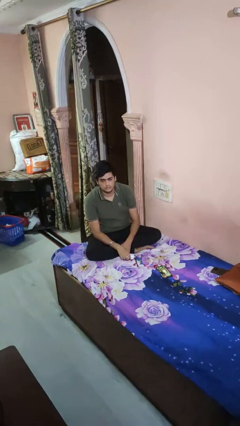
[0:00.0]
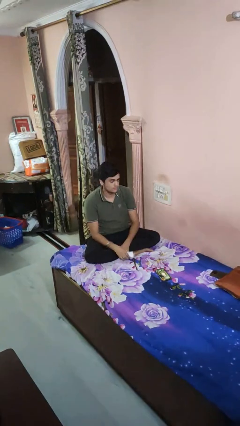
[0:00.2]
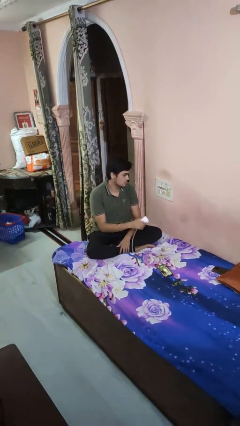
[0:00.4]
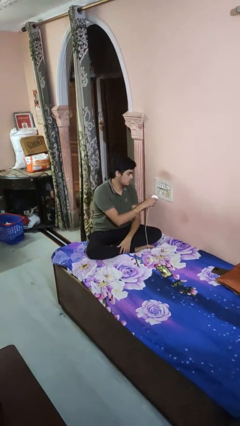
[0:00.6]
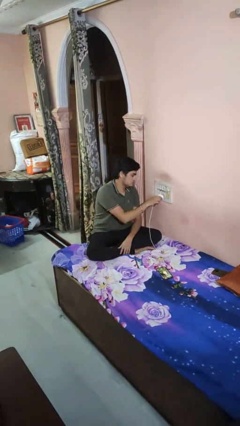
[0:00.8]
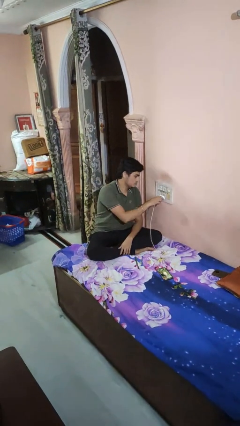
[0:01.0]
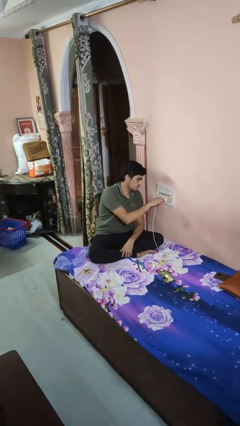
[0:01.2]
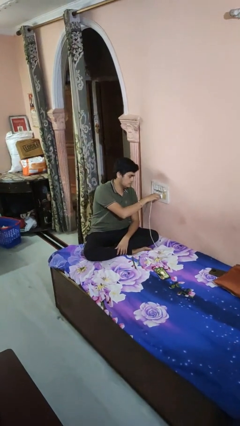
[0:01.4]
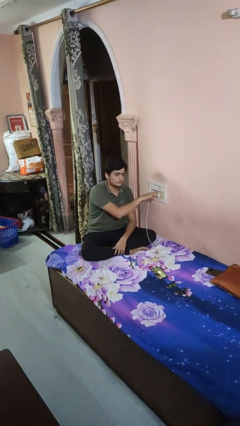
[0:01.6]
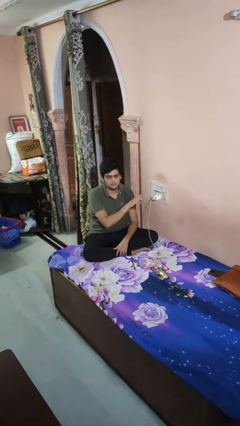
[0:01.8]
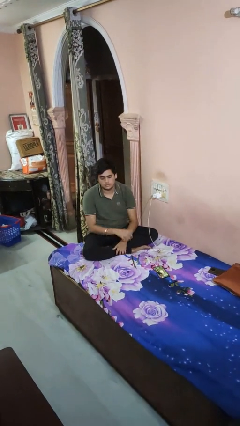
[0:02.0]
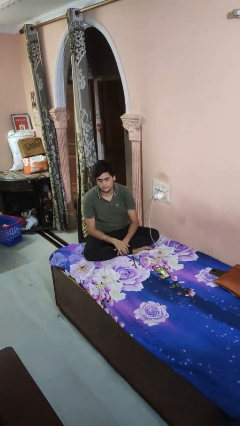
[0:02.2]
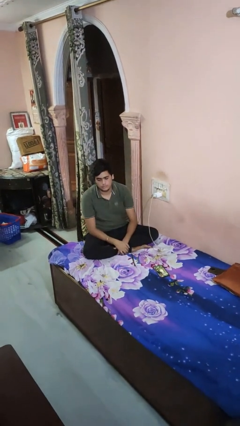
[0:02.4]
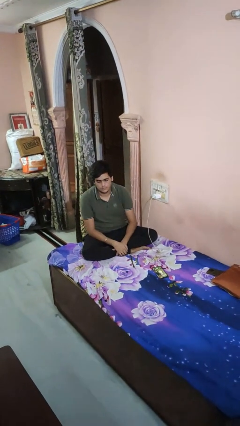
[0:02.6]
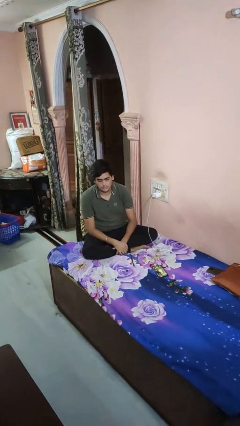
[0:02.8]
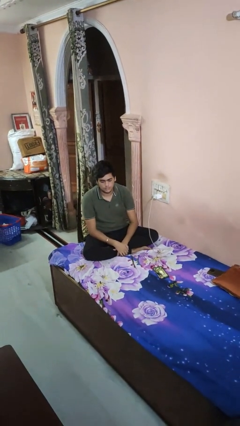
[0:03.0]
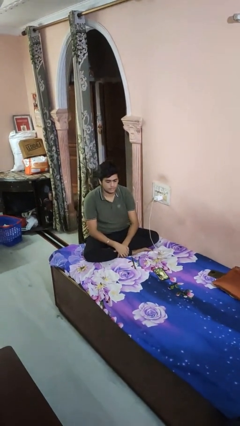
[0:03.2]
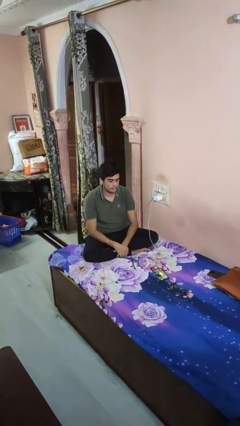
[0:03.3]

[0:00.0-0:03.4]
person plugs into electrical socket

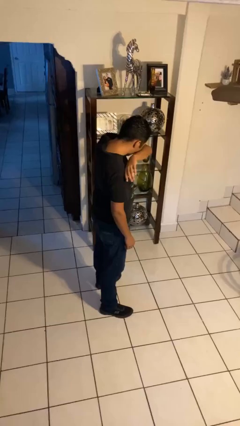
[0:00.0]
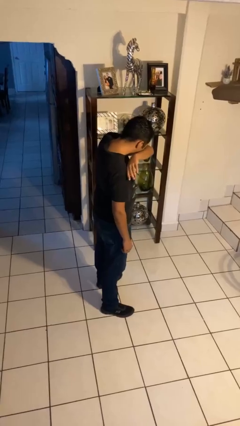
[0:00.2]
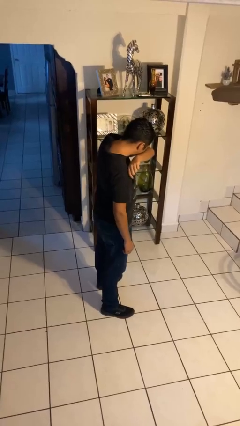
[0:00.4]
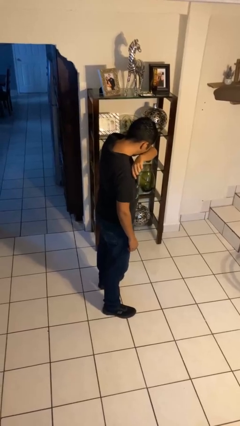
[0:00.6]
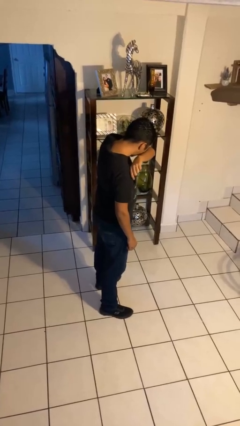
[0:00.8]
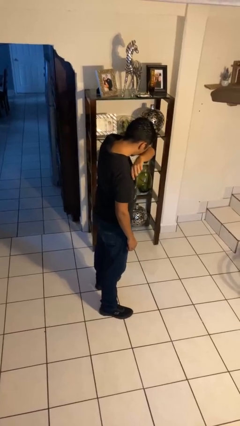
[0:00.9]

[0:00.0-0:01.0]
person sneezes into arm

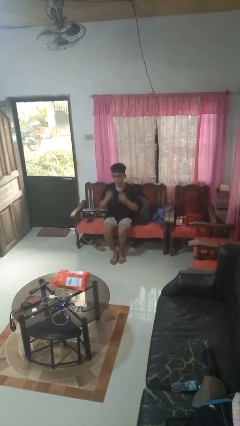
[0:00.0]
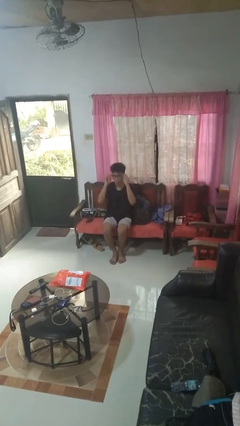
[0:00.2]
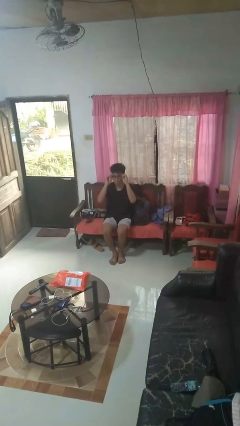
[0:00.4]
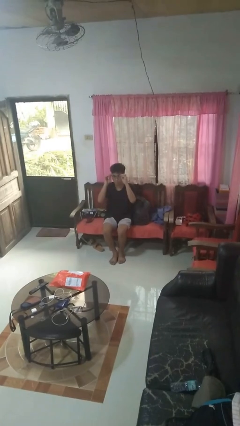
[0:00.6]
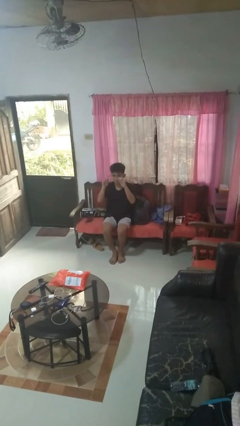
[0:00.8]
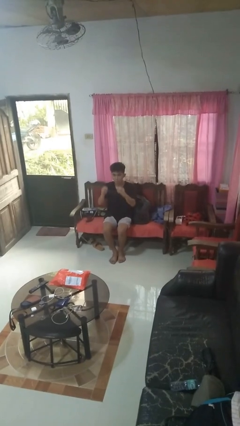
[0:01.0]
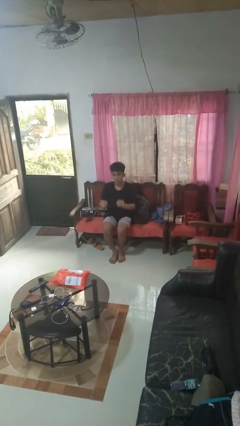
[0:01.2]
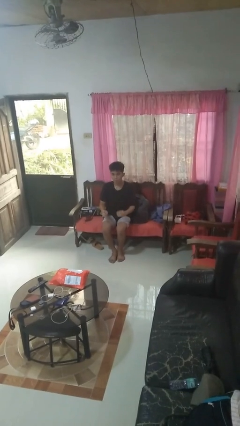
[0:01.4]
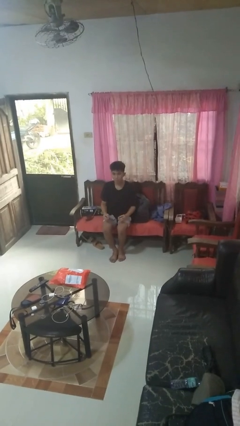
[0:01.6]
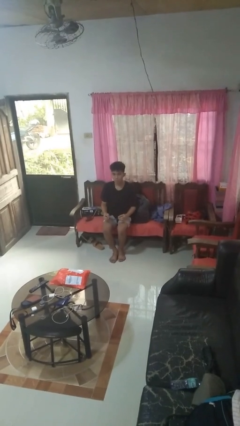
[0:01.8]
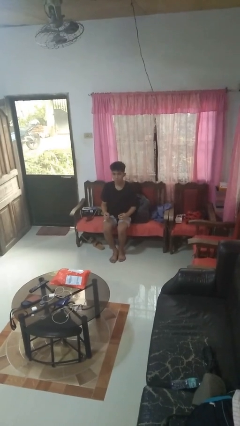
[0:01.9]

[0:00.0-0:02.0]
person takes off glasses

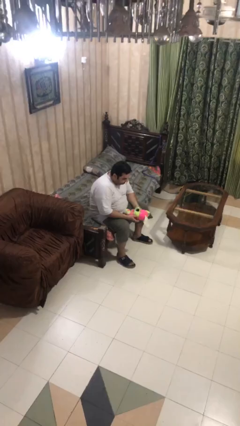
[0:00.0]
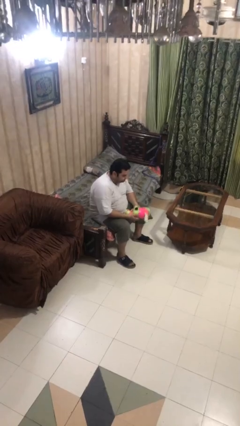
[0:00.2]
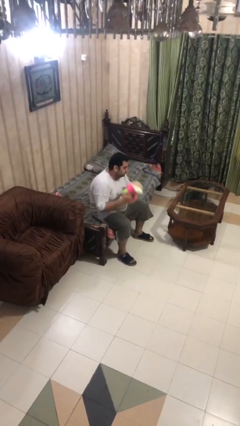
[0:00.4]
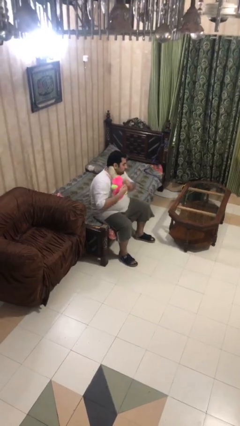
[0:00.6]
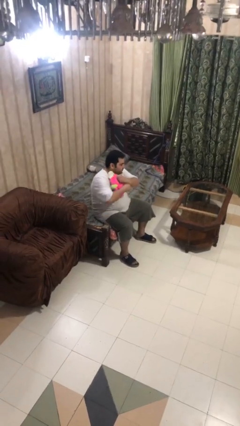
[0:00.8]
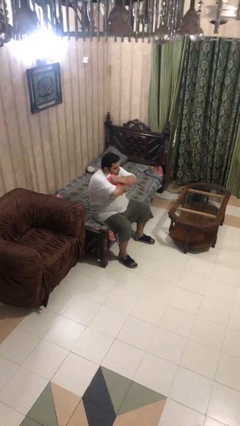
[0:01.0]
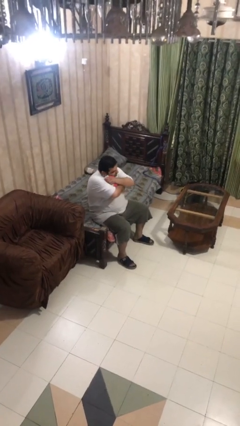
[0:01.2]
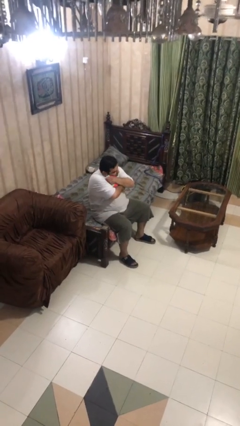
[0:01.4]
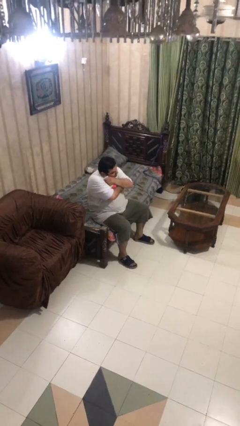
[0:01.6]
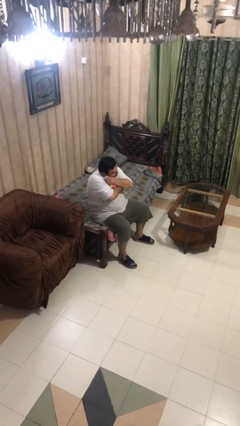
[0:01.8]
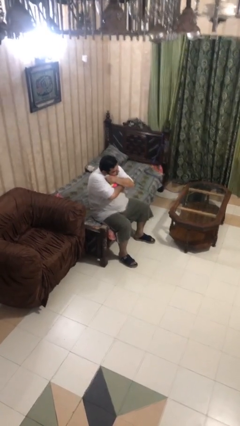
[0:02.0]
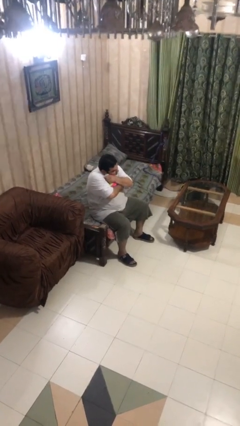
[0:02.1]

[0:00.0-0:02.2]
person hugs stuffed animal

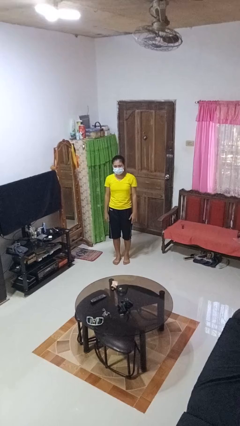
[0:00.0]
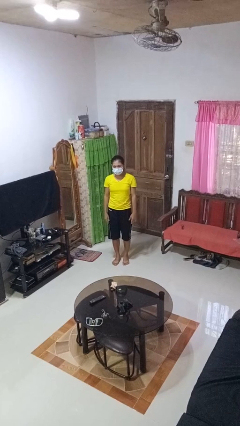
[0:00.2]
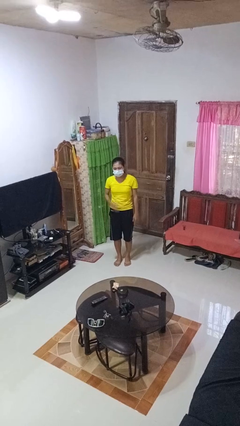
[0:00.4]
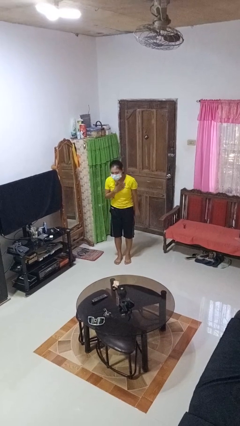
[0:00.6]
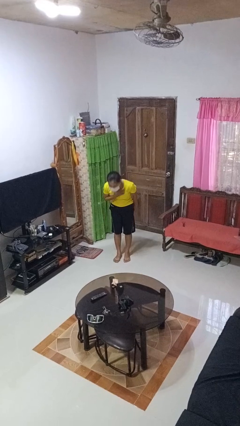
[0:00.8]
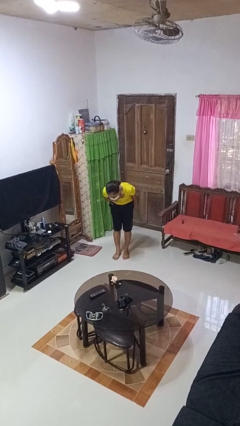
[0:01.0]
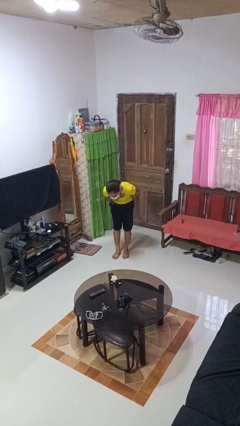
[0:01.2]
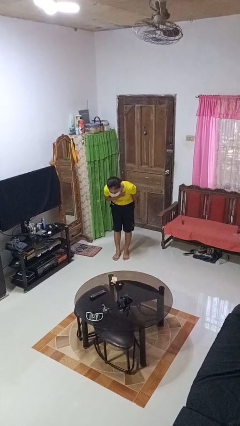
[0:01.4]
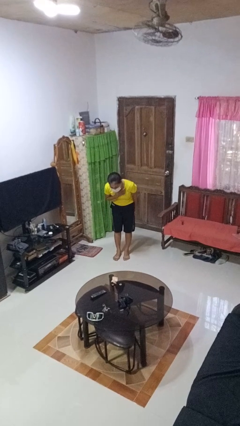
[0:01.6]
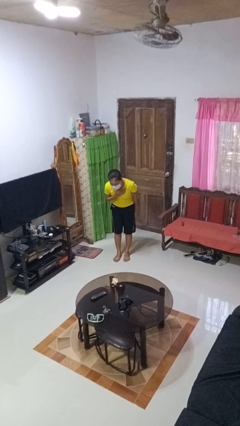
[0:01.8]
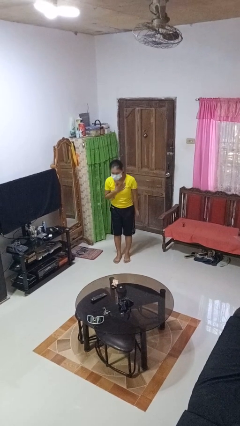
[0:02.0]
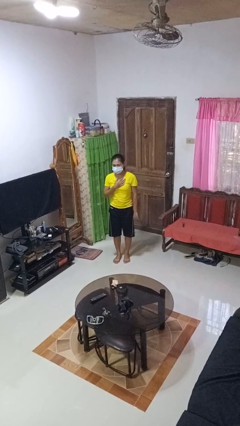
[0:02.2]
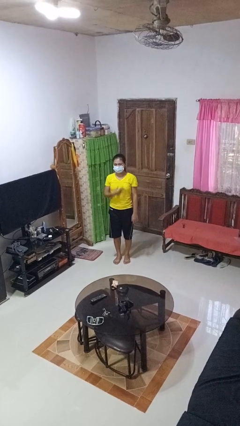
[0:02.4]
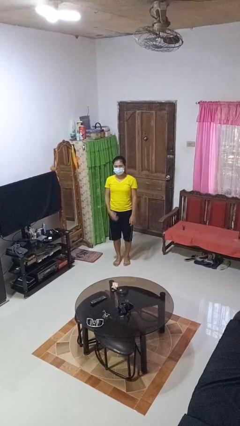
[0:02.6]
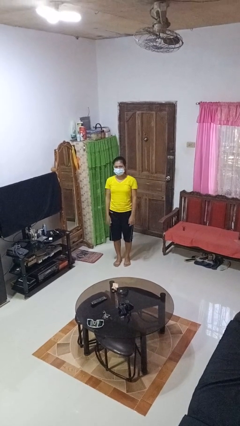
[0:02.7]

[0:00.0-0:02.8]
person bows

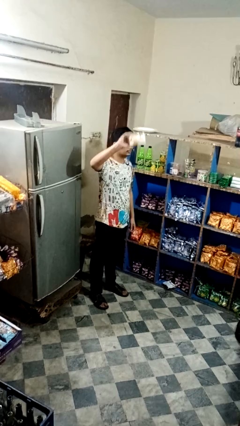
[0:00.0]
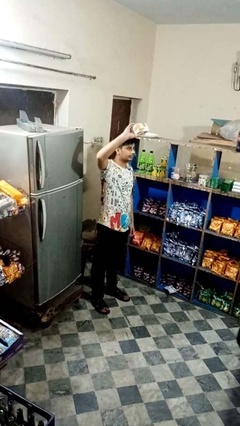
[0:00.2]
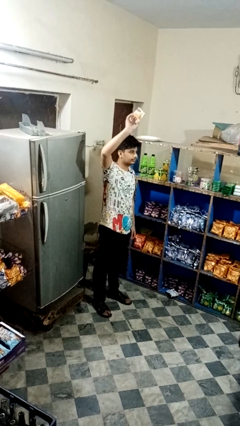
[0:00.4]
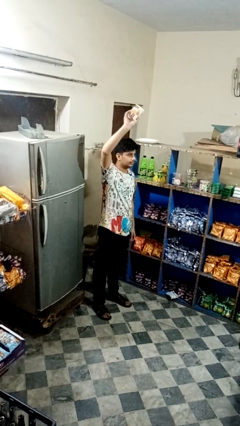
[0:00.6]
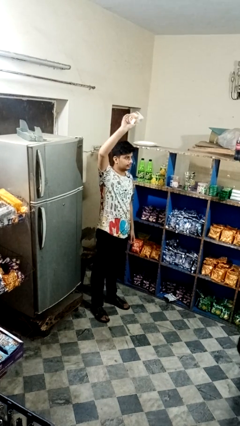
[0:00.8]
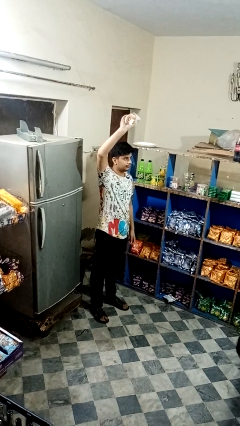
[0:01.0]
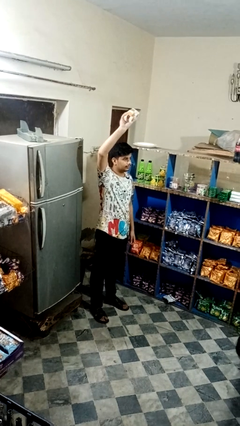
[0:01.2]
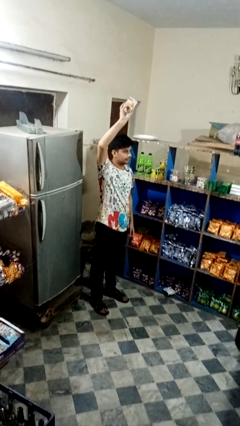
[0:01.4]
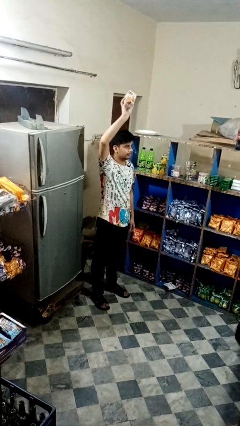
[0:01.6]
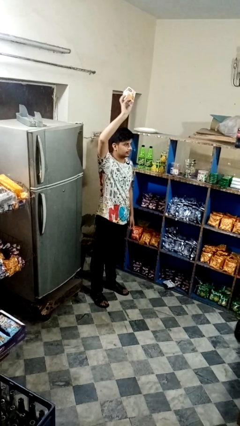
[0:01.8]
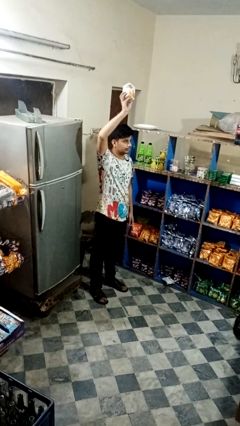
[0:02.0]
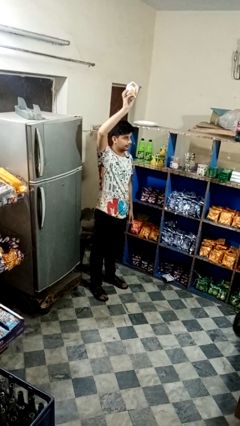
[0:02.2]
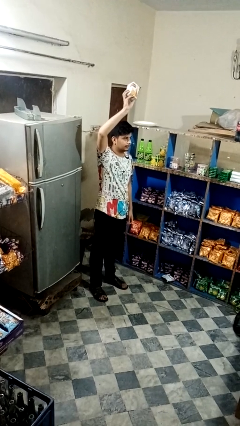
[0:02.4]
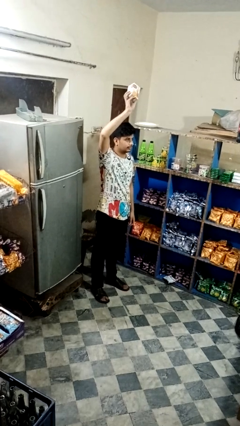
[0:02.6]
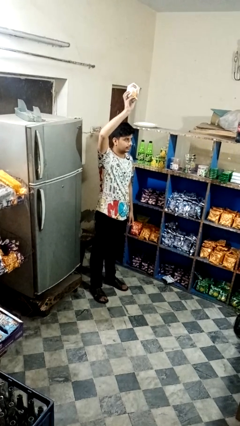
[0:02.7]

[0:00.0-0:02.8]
person holds object above head

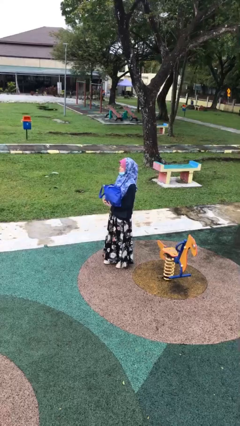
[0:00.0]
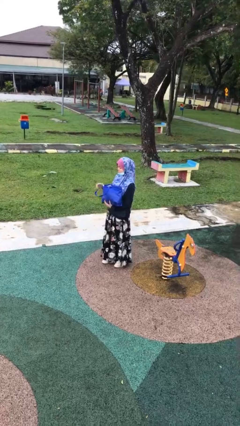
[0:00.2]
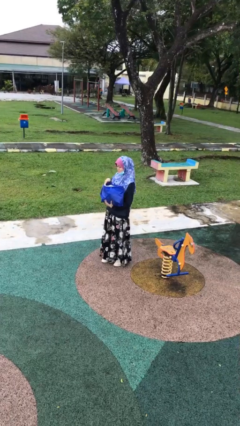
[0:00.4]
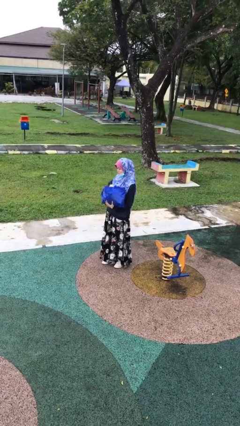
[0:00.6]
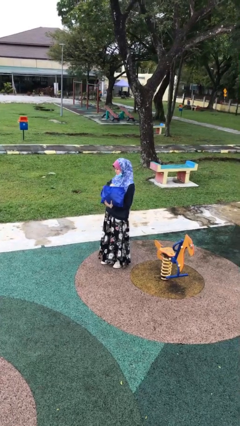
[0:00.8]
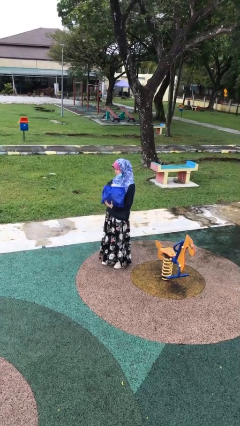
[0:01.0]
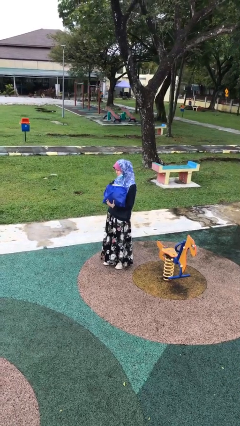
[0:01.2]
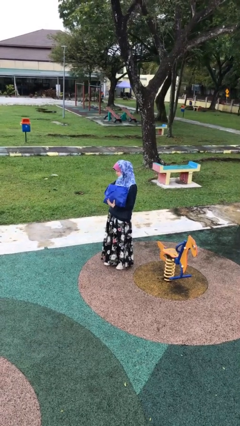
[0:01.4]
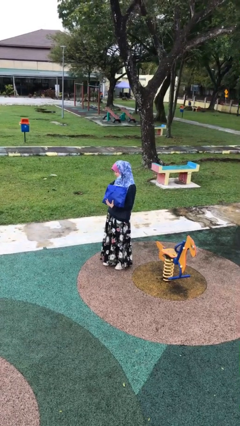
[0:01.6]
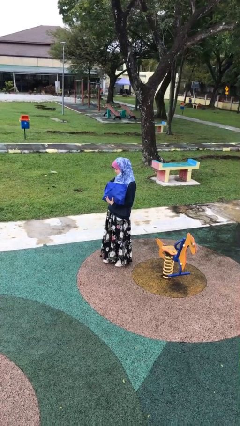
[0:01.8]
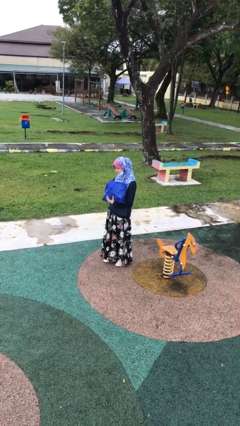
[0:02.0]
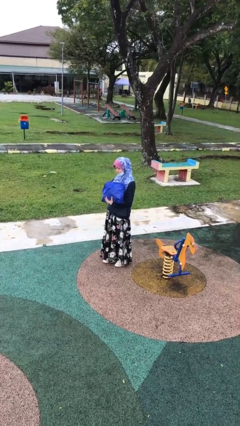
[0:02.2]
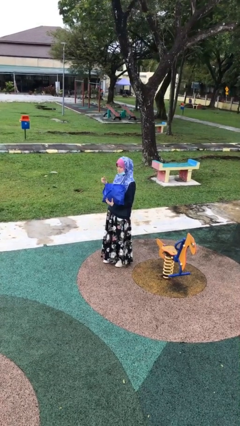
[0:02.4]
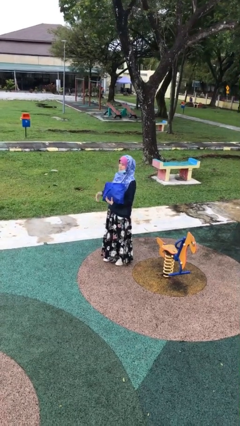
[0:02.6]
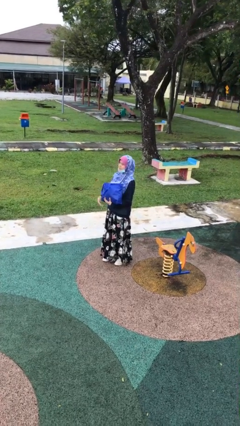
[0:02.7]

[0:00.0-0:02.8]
person searches in bag
